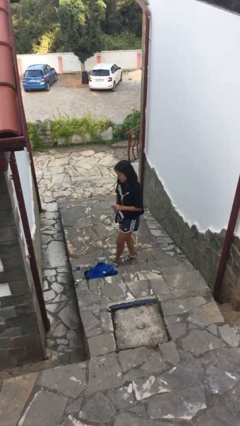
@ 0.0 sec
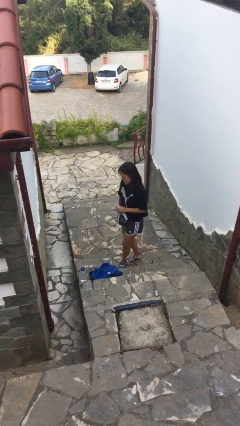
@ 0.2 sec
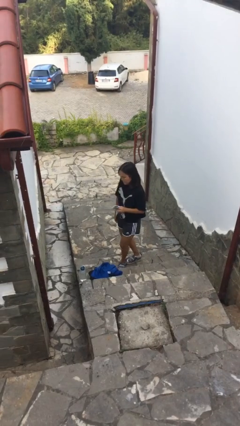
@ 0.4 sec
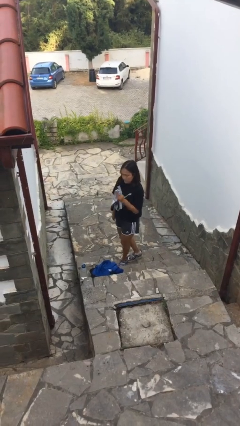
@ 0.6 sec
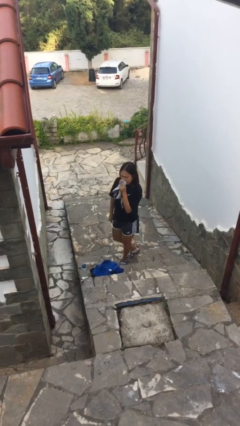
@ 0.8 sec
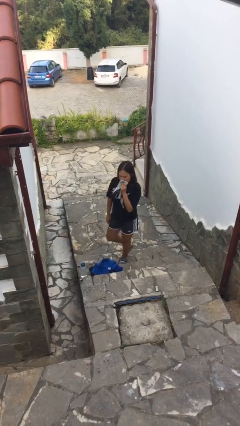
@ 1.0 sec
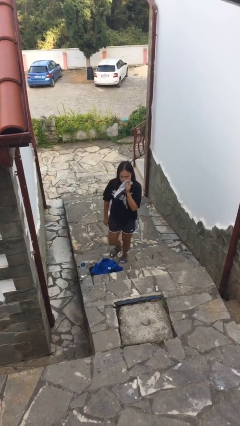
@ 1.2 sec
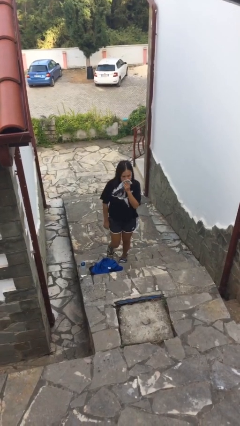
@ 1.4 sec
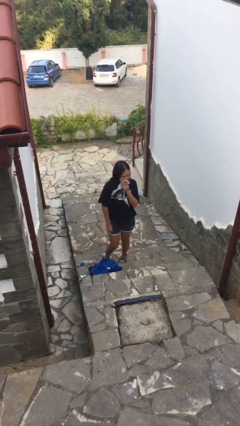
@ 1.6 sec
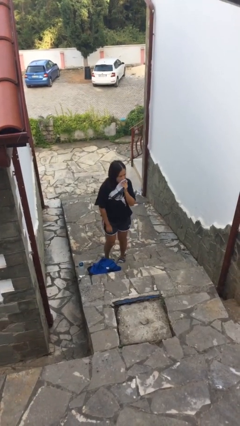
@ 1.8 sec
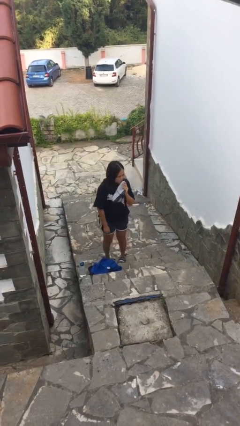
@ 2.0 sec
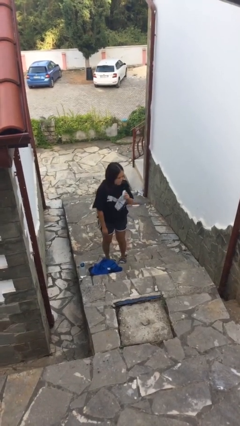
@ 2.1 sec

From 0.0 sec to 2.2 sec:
person wipes mouth with napkin

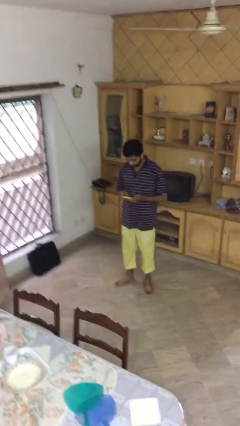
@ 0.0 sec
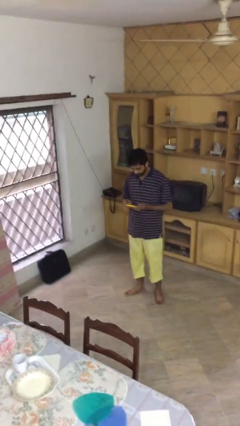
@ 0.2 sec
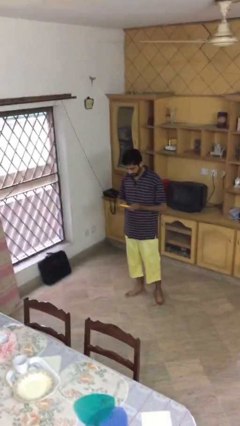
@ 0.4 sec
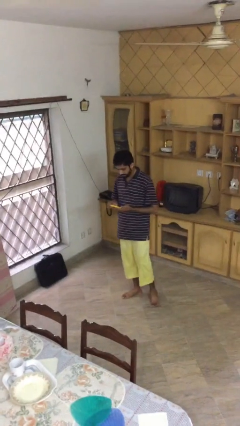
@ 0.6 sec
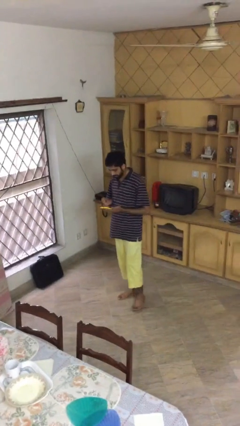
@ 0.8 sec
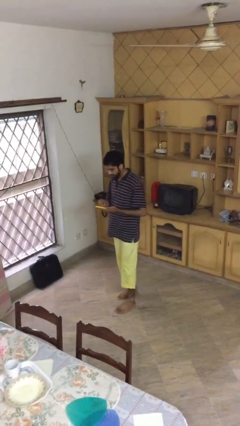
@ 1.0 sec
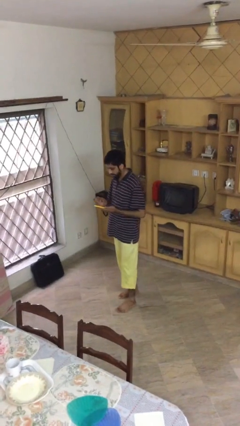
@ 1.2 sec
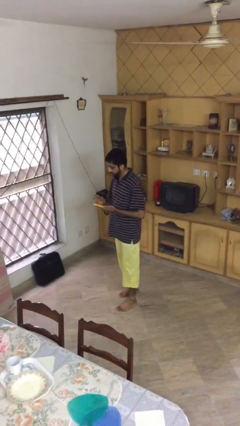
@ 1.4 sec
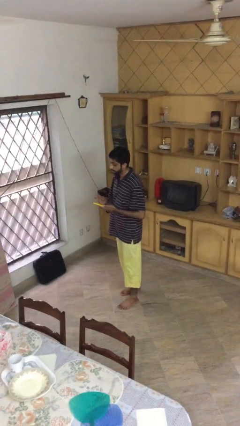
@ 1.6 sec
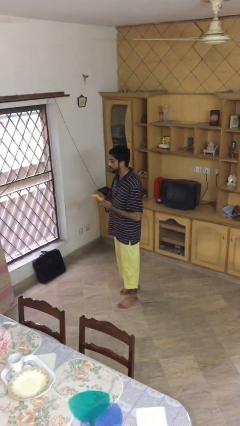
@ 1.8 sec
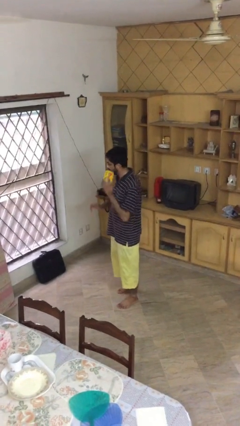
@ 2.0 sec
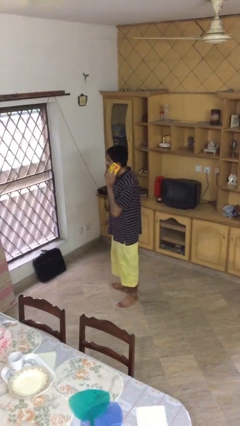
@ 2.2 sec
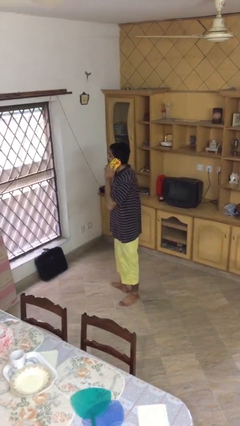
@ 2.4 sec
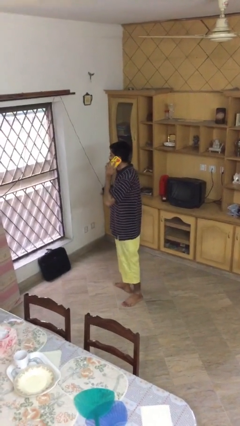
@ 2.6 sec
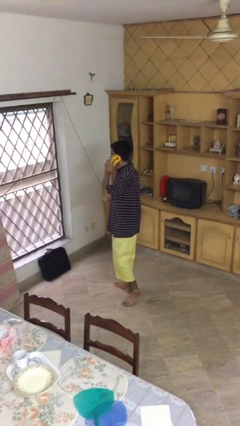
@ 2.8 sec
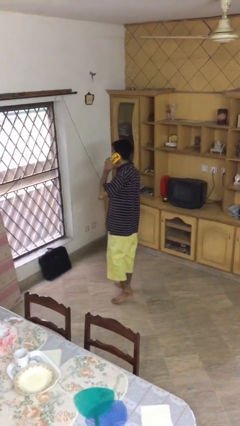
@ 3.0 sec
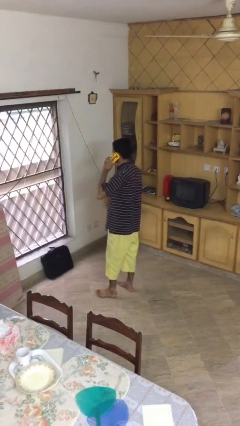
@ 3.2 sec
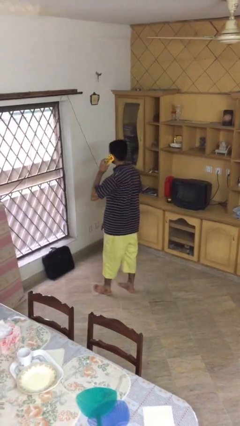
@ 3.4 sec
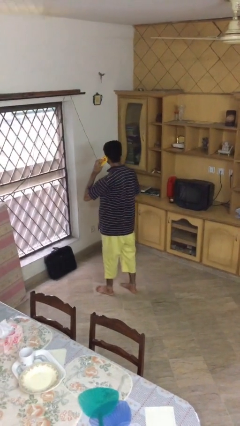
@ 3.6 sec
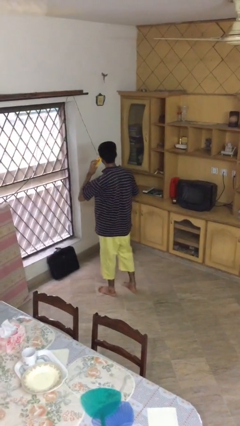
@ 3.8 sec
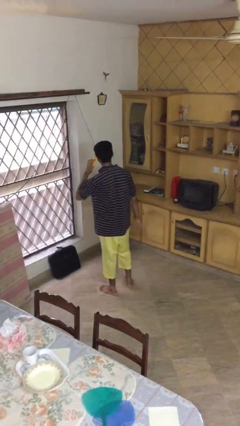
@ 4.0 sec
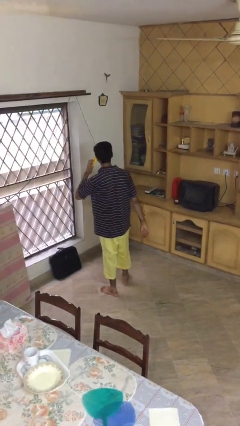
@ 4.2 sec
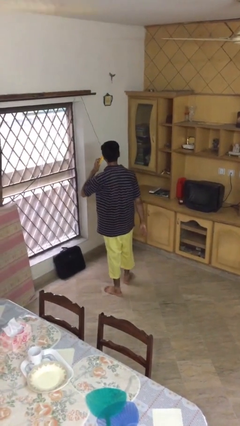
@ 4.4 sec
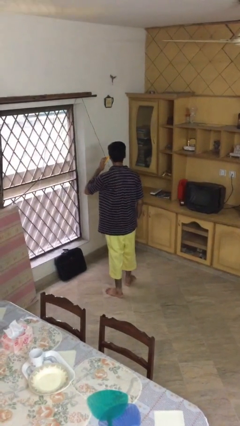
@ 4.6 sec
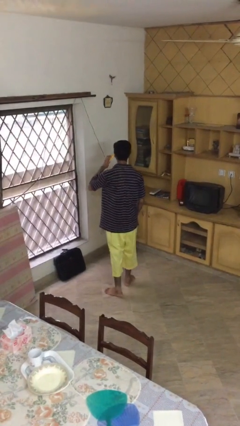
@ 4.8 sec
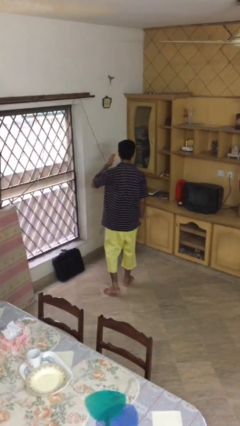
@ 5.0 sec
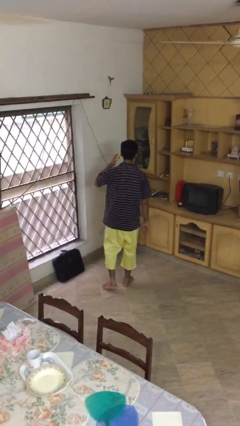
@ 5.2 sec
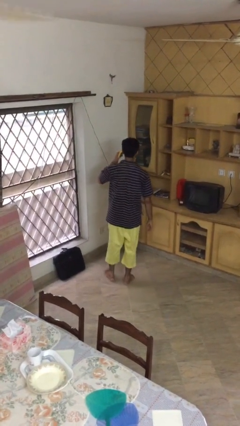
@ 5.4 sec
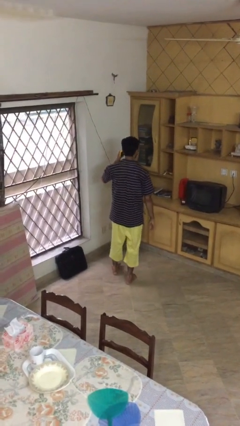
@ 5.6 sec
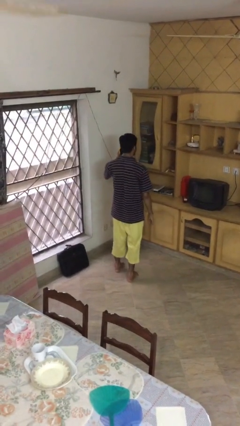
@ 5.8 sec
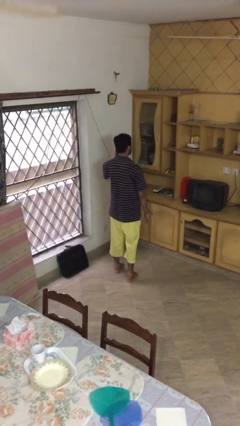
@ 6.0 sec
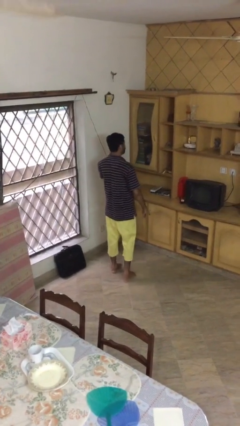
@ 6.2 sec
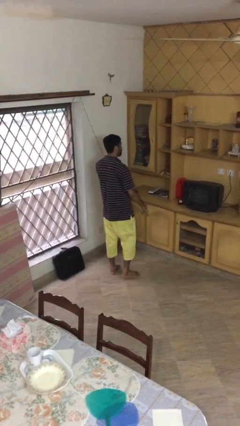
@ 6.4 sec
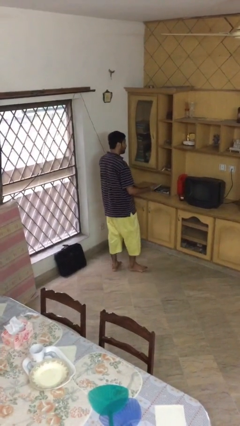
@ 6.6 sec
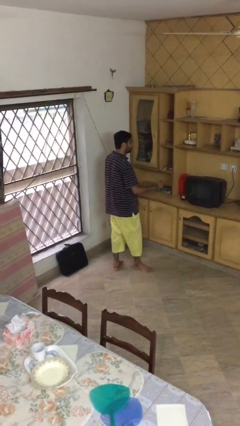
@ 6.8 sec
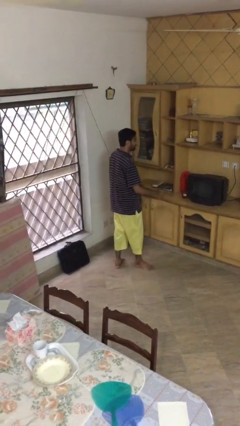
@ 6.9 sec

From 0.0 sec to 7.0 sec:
person talks on phone

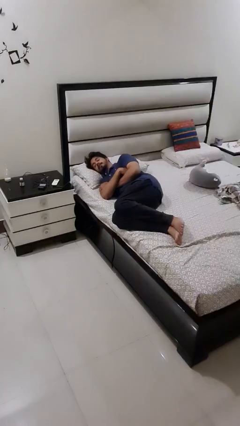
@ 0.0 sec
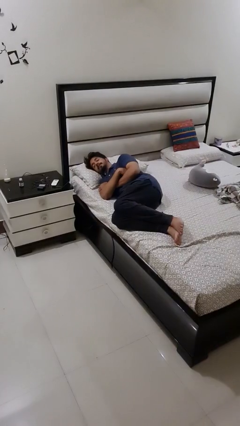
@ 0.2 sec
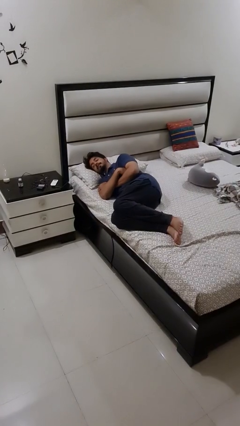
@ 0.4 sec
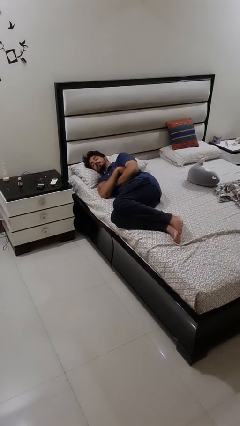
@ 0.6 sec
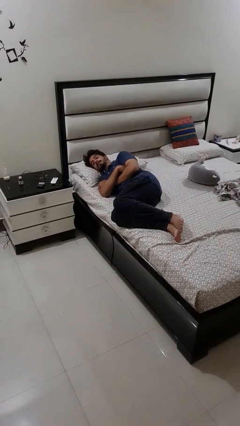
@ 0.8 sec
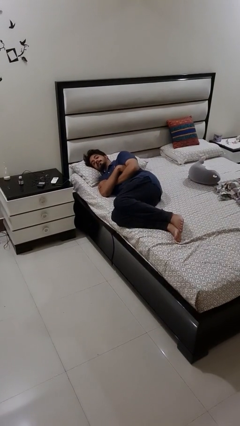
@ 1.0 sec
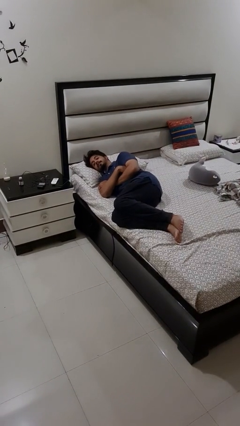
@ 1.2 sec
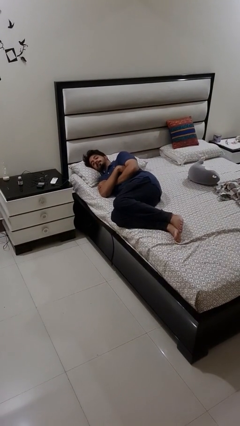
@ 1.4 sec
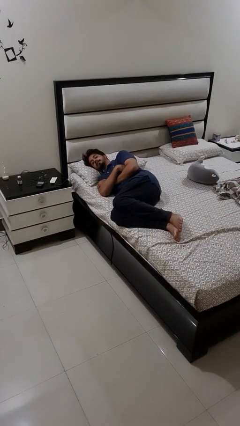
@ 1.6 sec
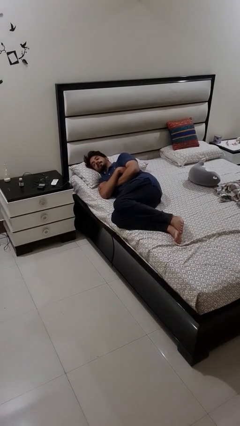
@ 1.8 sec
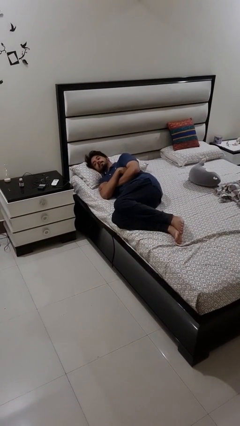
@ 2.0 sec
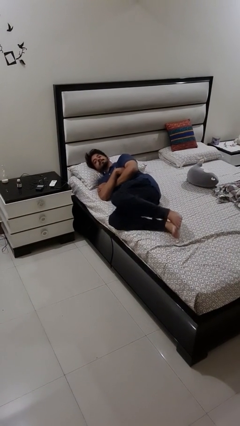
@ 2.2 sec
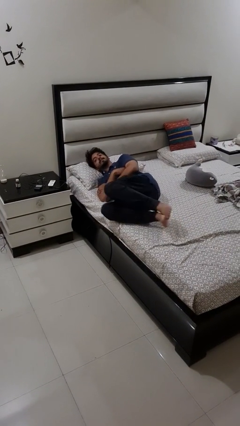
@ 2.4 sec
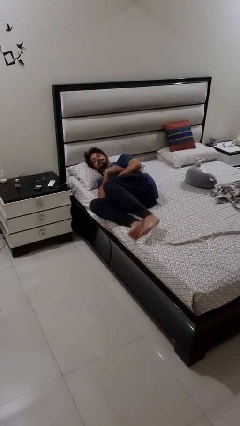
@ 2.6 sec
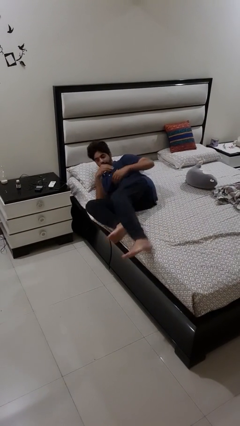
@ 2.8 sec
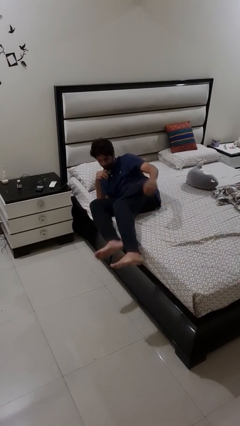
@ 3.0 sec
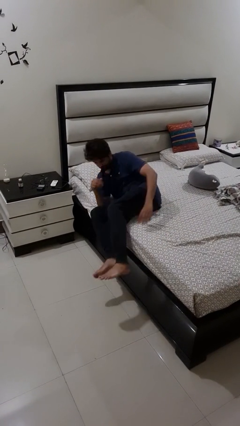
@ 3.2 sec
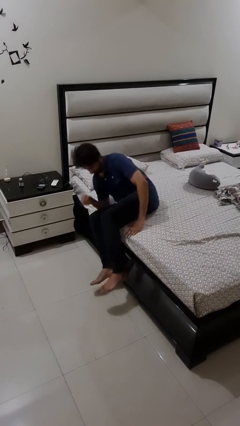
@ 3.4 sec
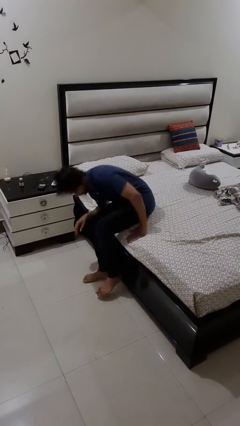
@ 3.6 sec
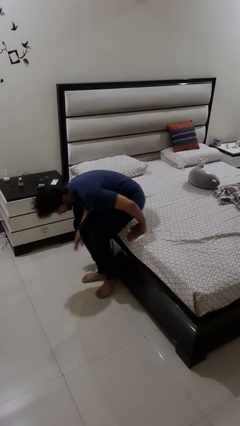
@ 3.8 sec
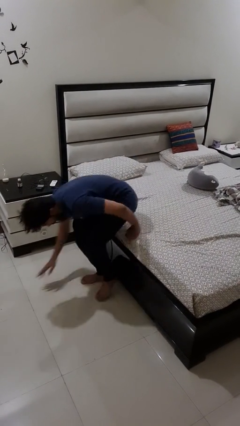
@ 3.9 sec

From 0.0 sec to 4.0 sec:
person falls from bed

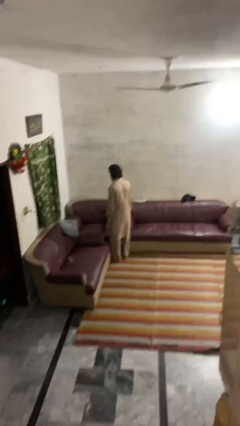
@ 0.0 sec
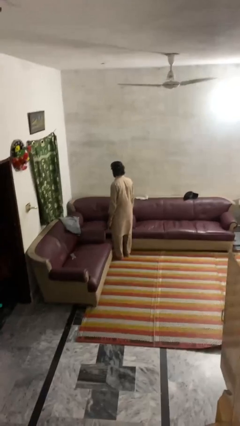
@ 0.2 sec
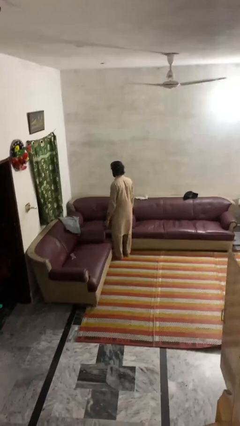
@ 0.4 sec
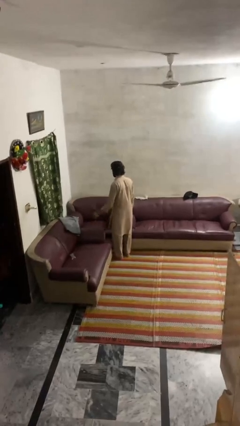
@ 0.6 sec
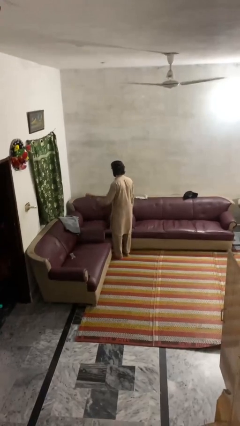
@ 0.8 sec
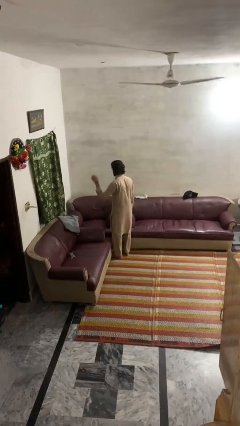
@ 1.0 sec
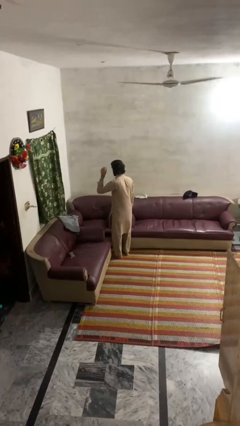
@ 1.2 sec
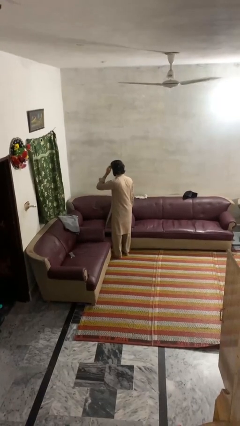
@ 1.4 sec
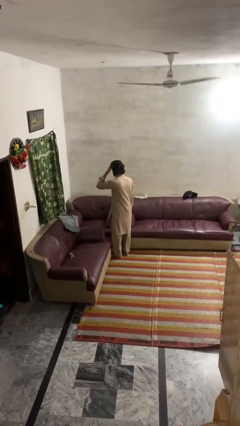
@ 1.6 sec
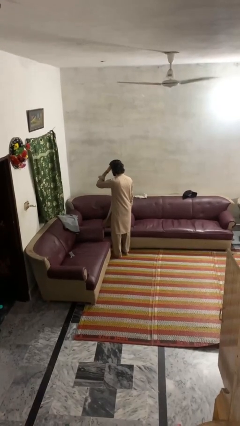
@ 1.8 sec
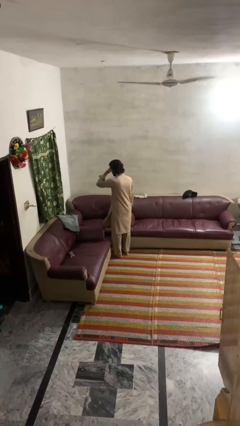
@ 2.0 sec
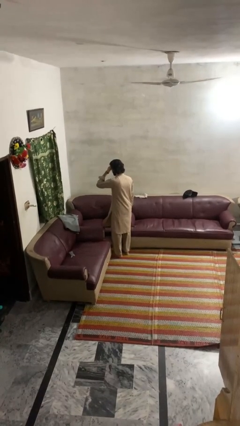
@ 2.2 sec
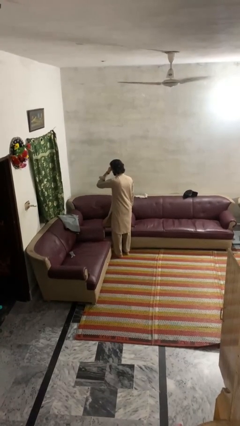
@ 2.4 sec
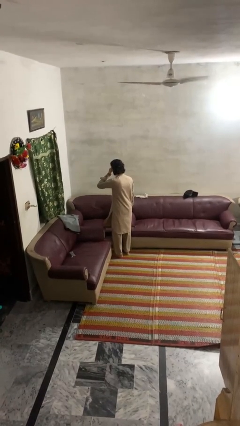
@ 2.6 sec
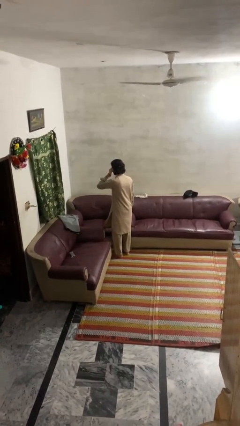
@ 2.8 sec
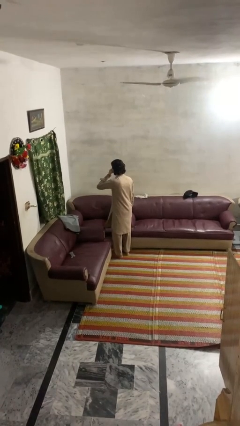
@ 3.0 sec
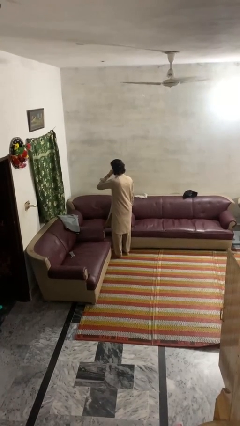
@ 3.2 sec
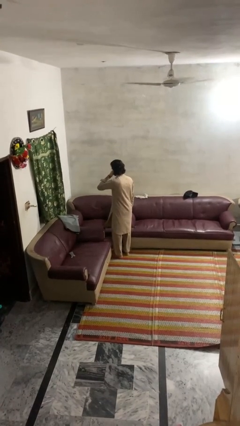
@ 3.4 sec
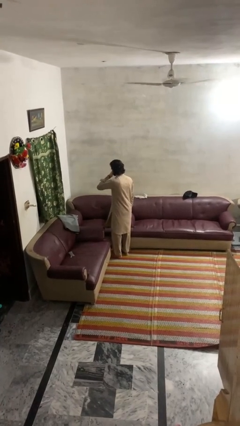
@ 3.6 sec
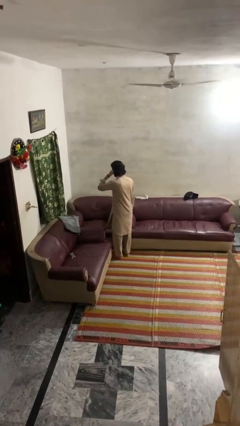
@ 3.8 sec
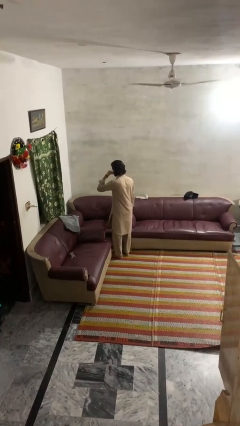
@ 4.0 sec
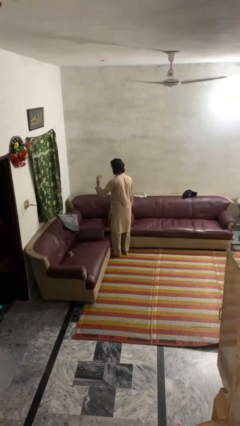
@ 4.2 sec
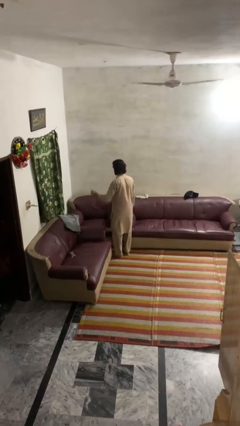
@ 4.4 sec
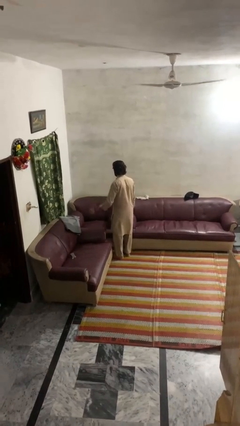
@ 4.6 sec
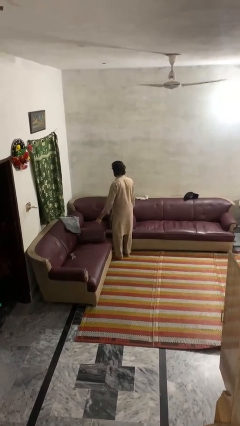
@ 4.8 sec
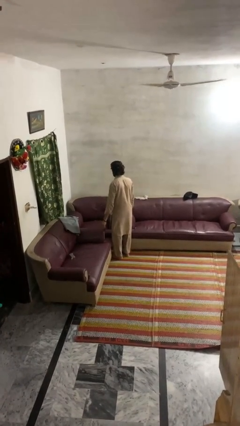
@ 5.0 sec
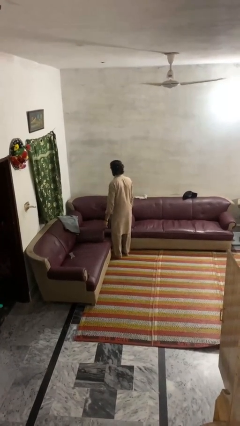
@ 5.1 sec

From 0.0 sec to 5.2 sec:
person scratches face
